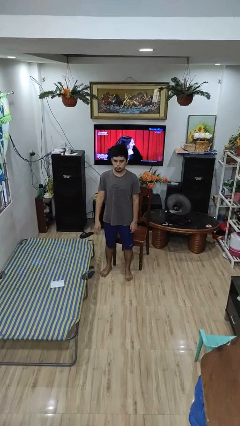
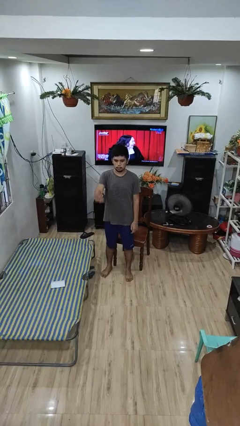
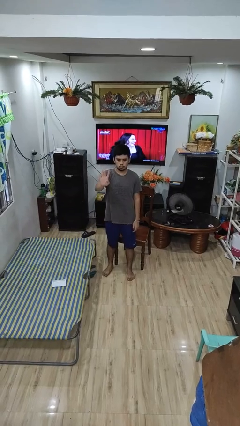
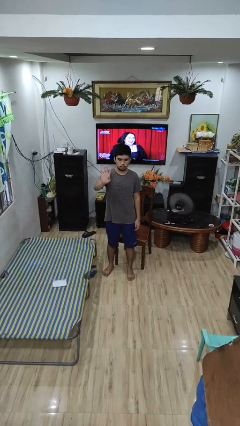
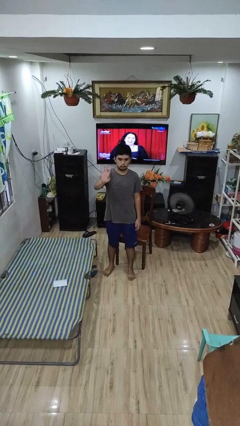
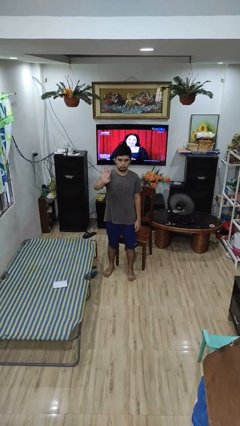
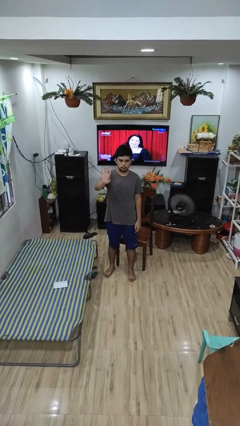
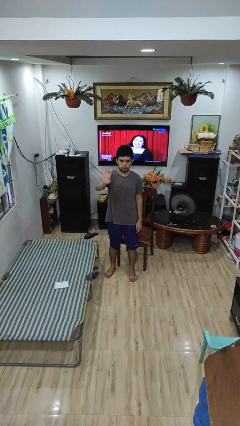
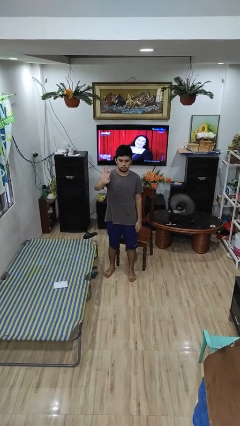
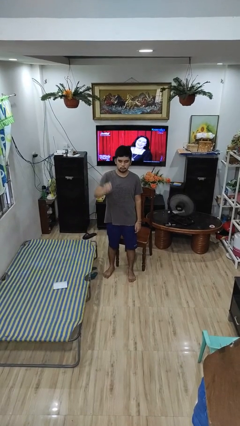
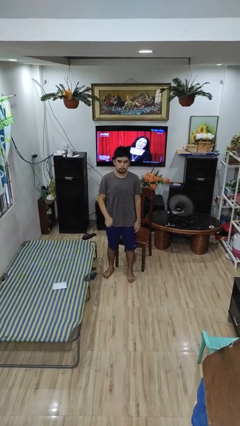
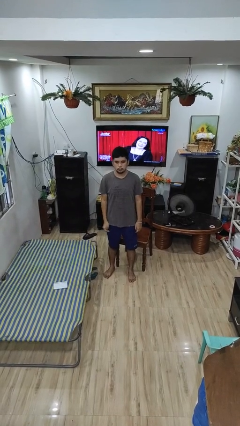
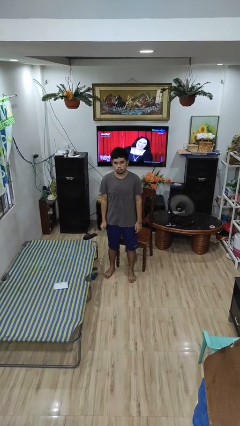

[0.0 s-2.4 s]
person gestures number four

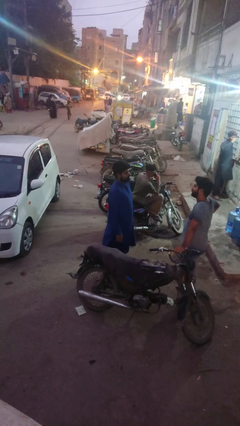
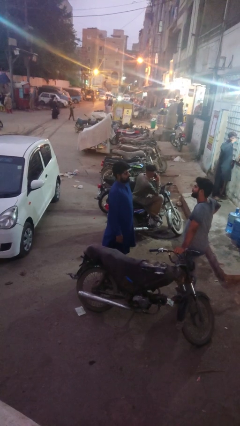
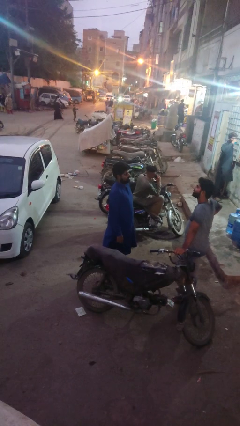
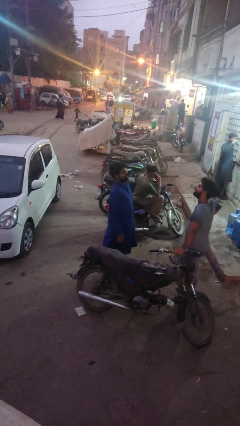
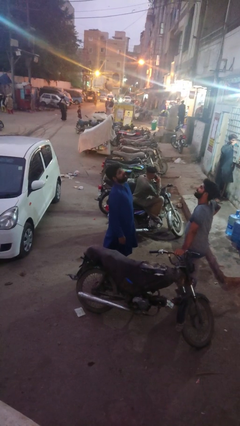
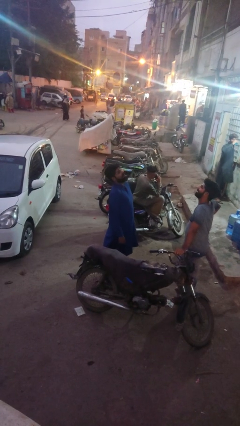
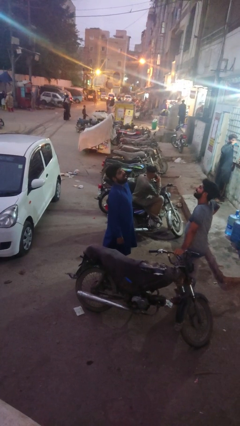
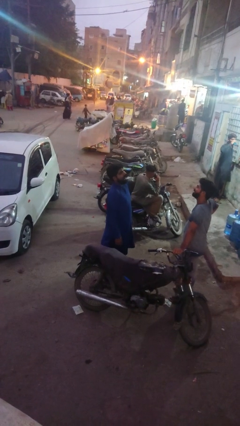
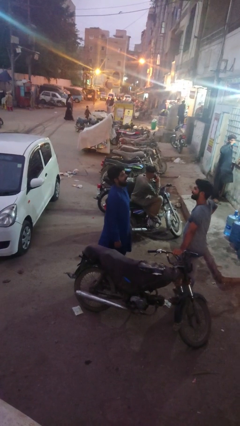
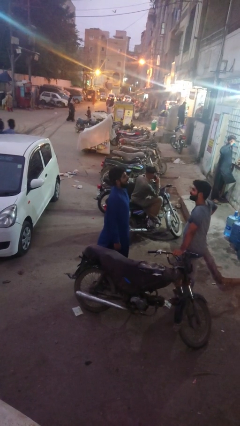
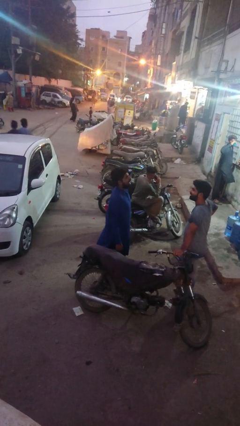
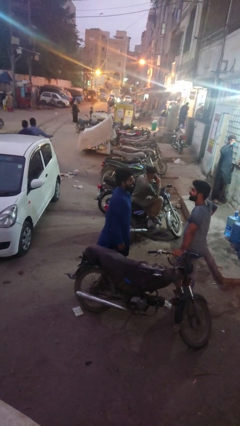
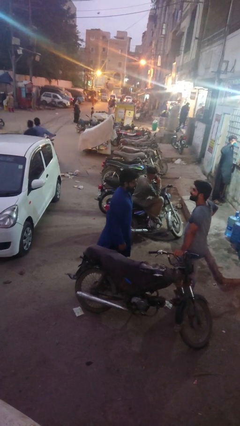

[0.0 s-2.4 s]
person laughs with person

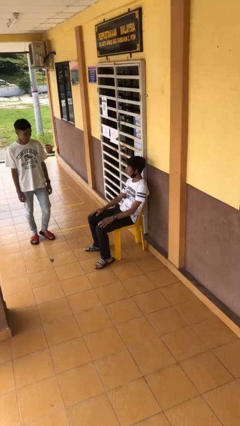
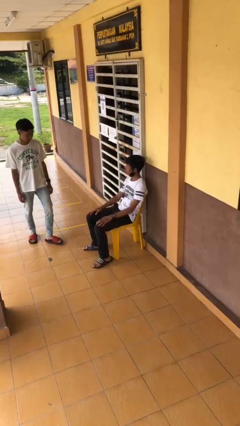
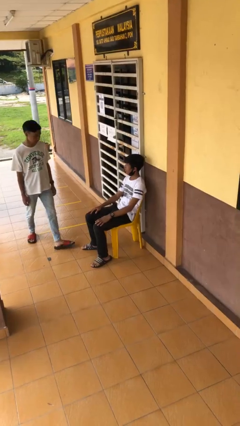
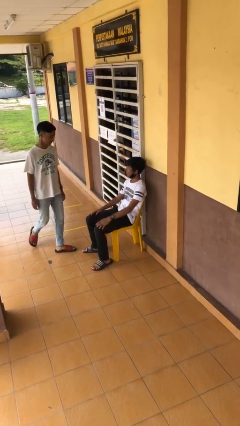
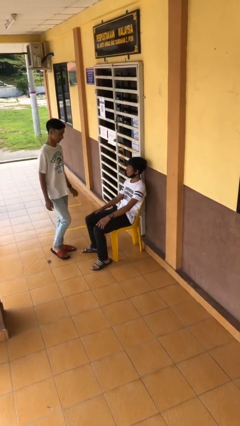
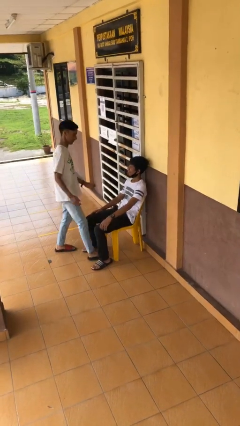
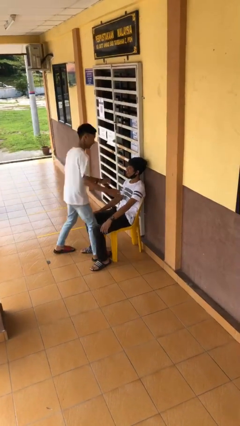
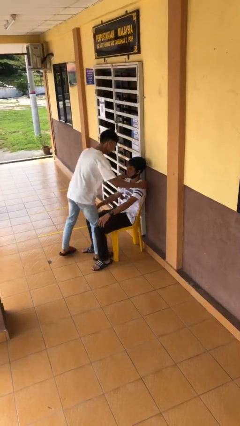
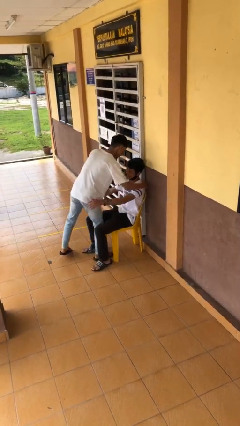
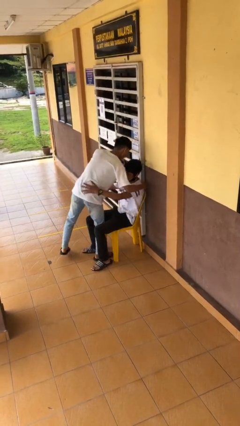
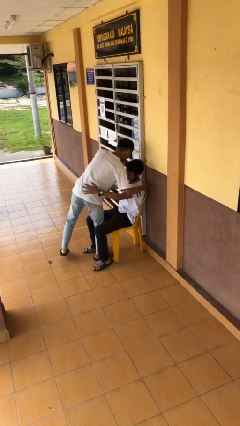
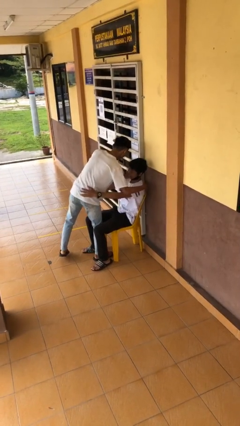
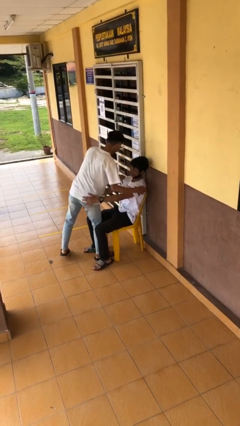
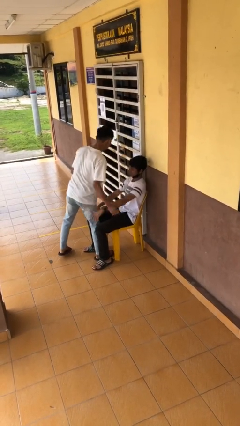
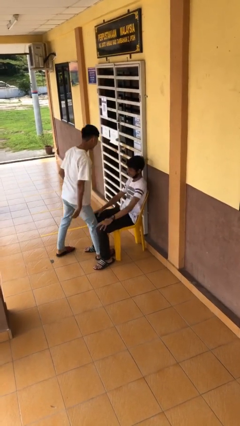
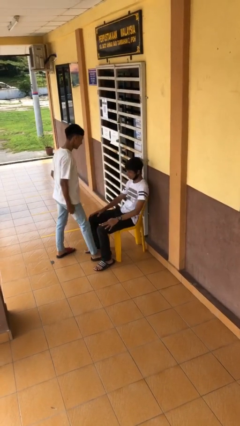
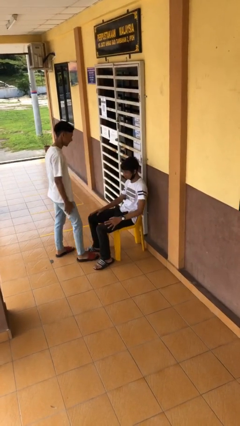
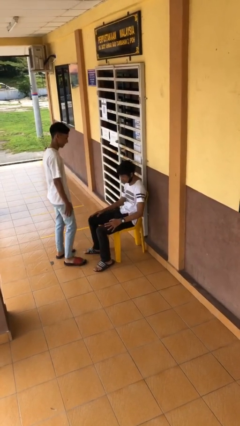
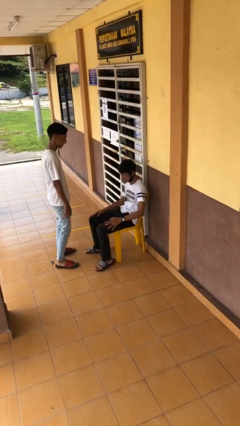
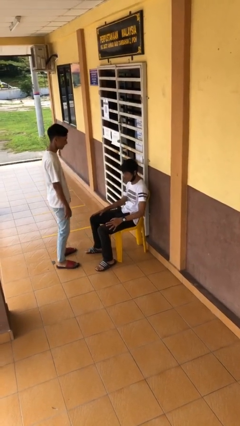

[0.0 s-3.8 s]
person embraces person

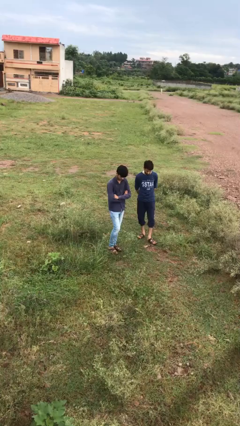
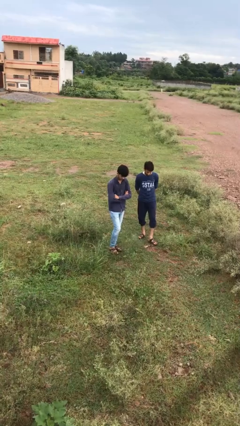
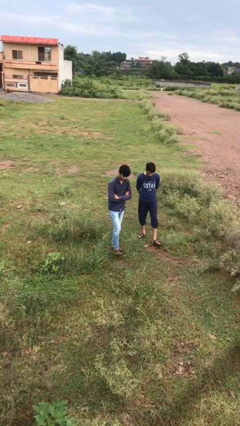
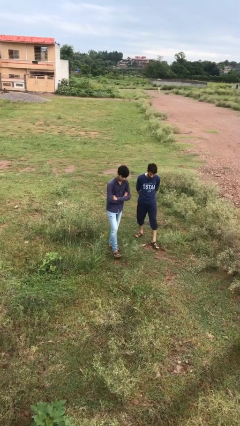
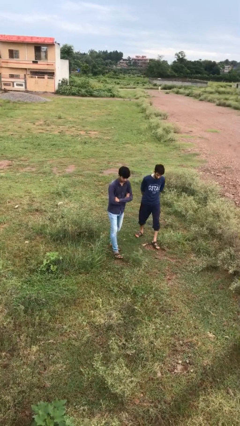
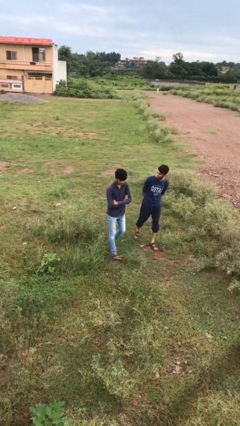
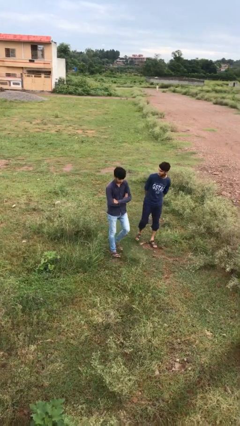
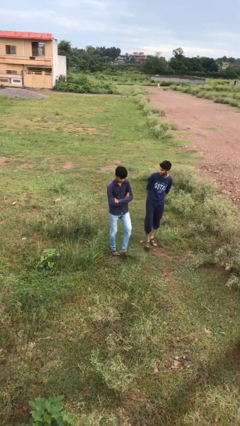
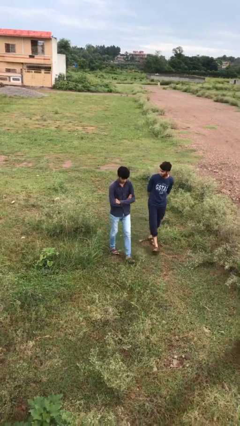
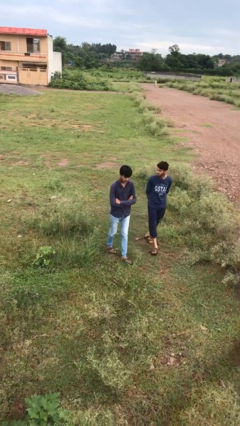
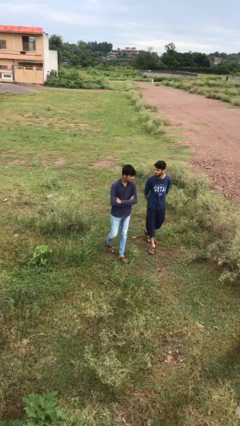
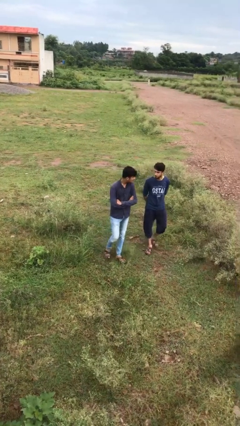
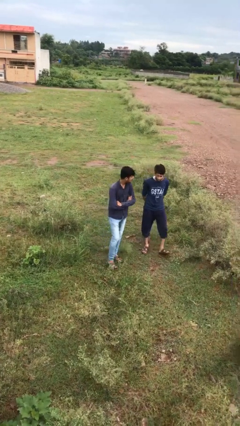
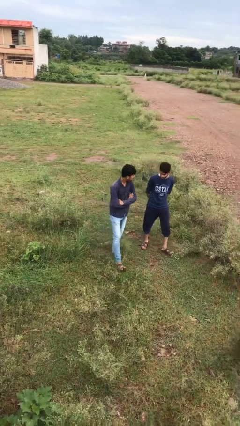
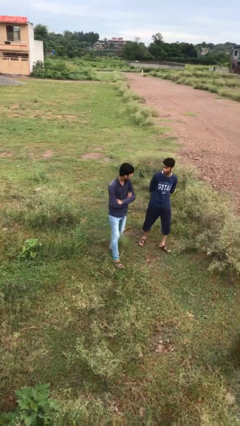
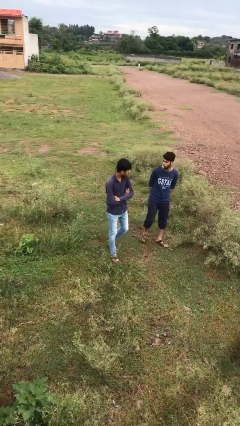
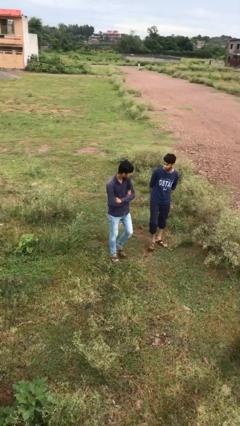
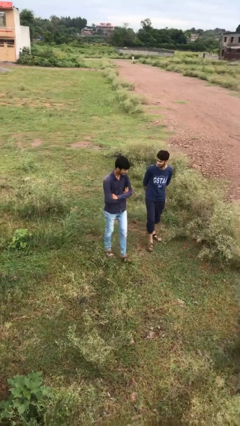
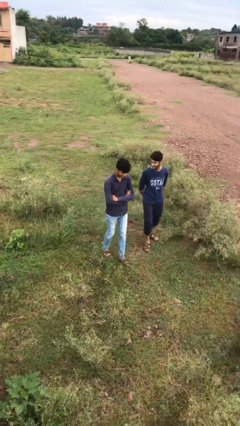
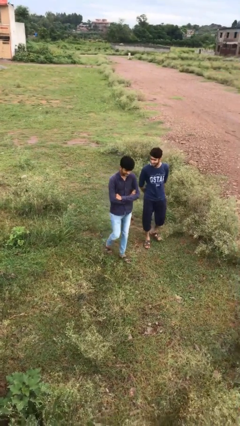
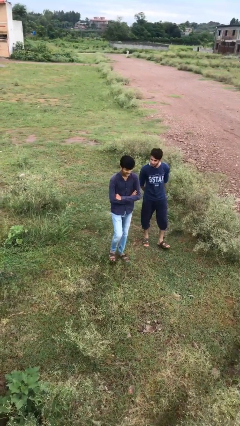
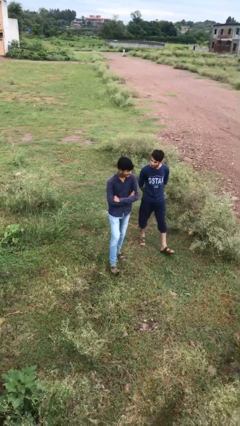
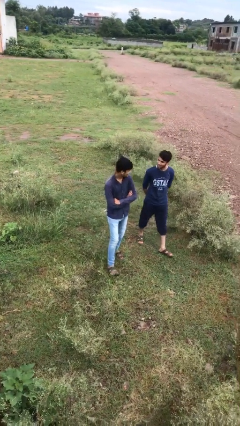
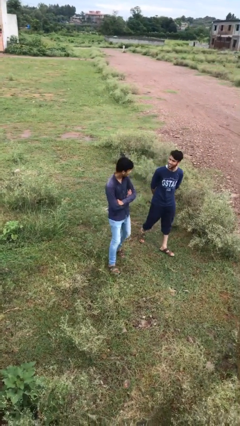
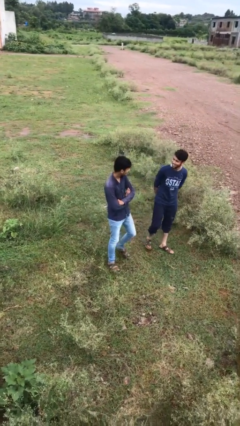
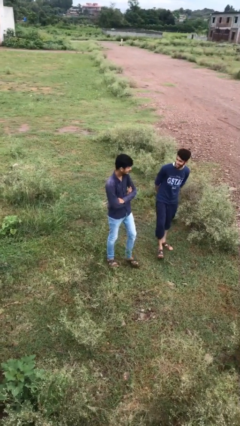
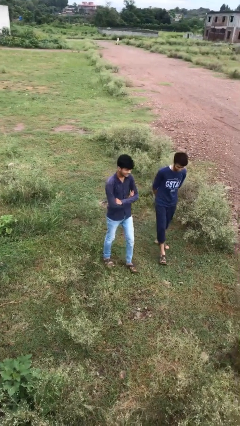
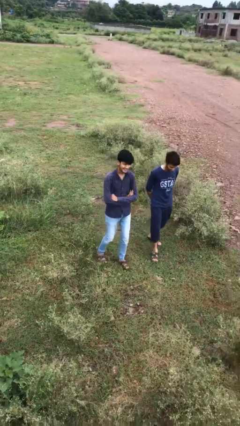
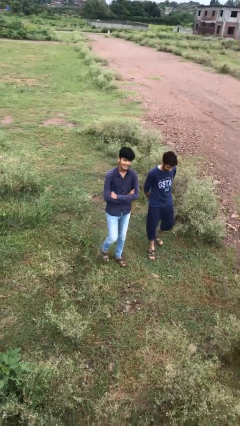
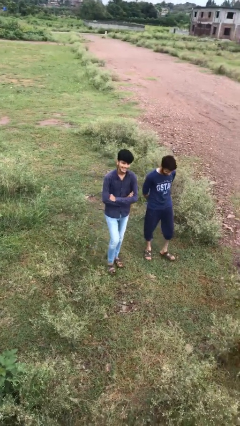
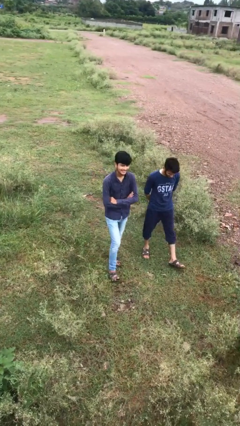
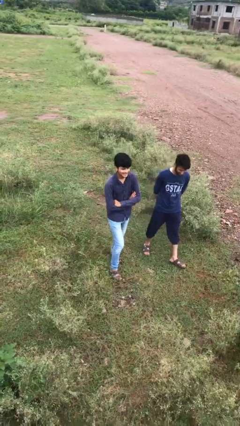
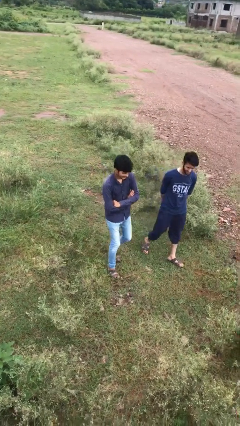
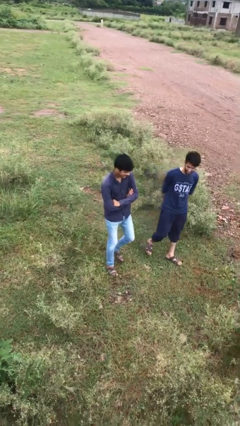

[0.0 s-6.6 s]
person talks to person

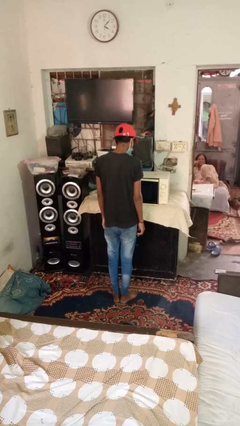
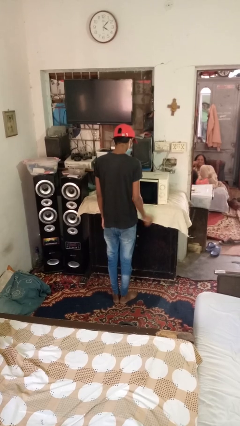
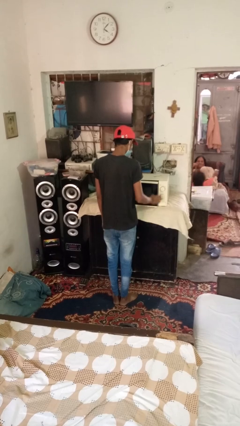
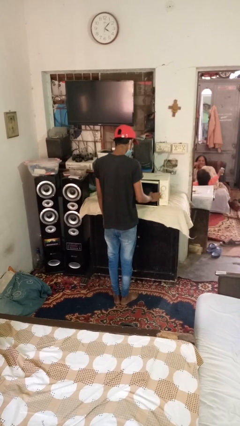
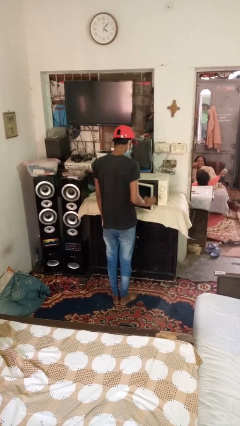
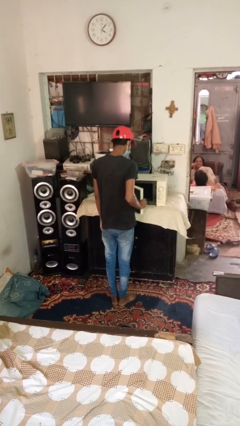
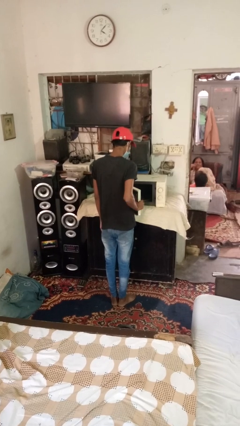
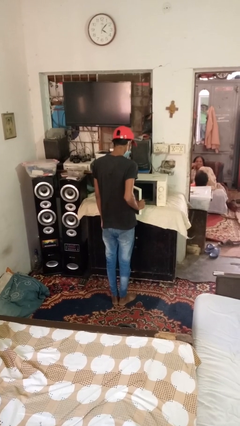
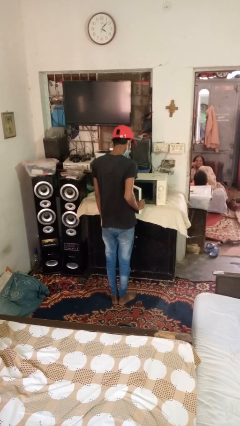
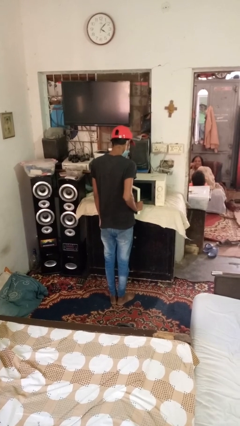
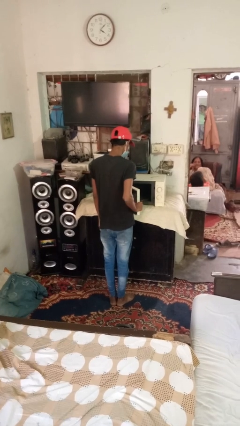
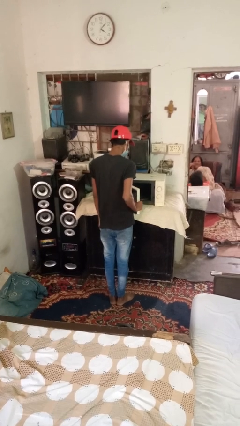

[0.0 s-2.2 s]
person opens dishwasher
